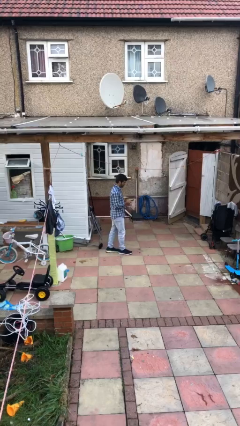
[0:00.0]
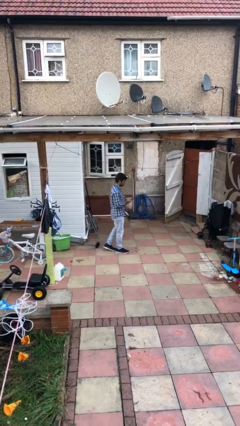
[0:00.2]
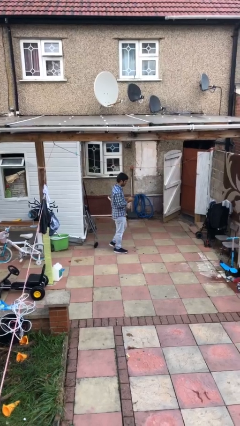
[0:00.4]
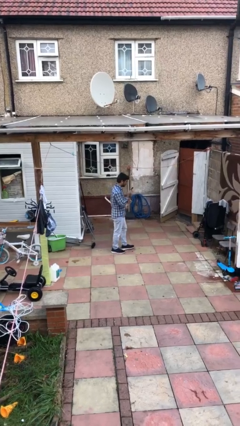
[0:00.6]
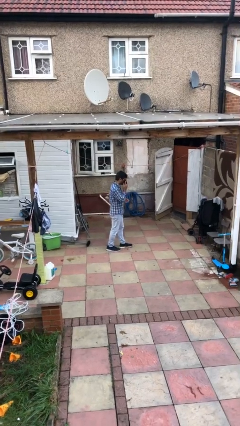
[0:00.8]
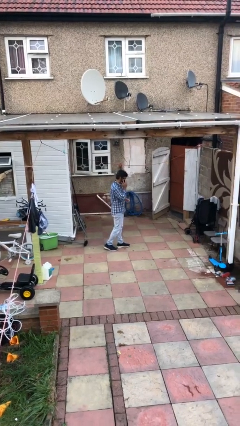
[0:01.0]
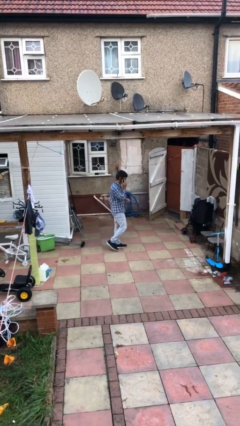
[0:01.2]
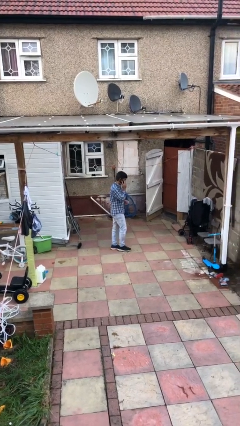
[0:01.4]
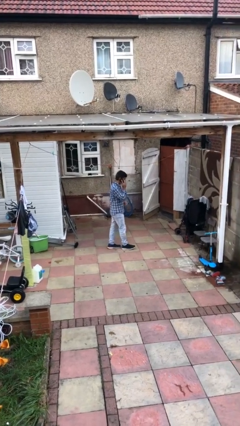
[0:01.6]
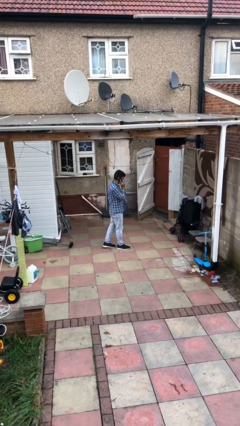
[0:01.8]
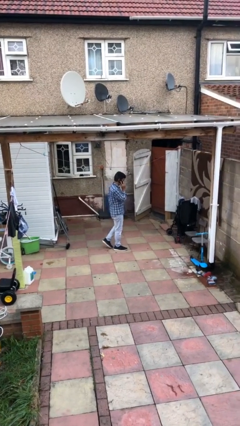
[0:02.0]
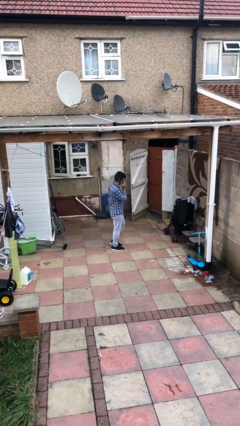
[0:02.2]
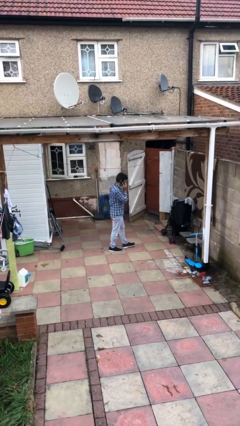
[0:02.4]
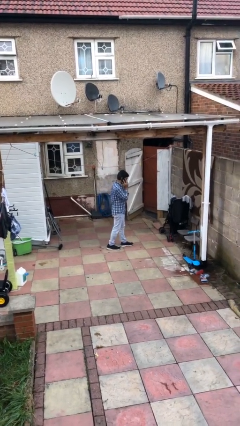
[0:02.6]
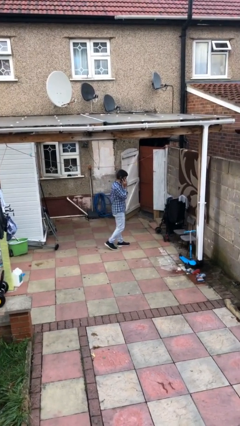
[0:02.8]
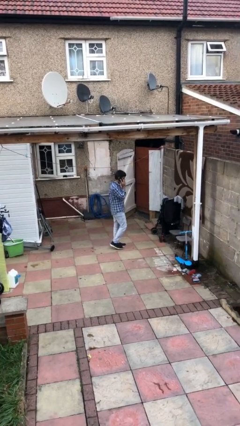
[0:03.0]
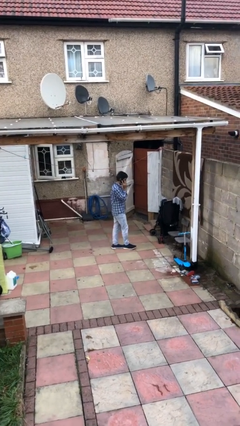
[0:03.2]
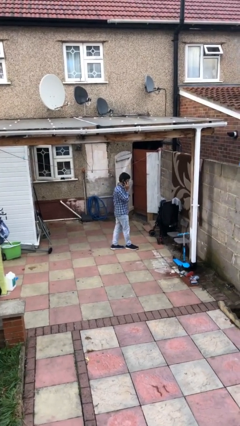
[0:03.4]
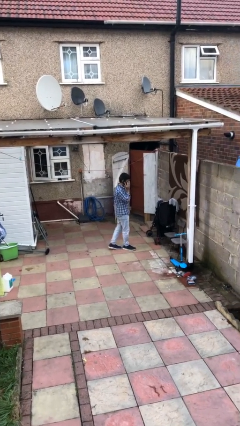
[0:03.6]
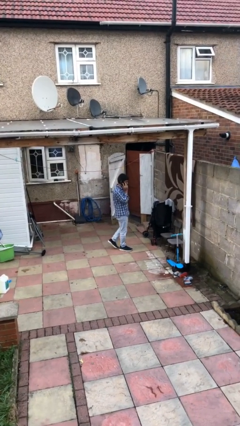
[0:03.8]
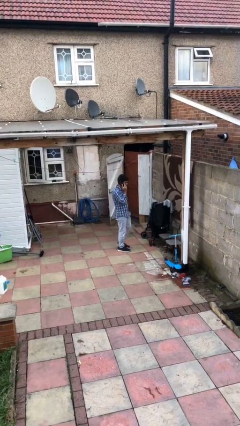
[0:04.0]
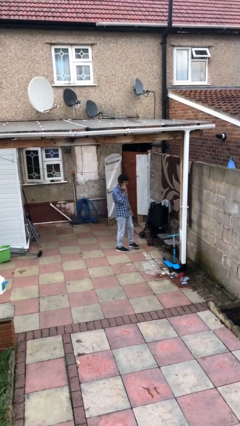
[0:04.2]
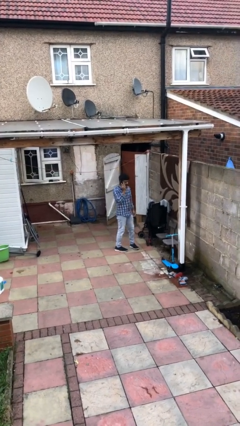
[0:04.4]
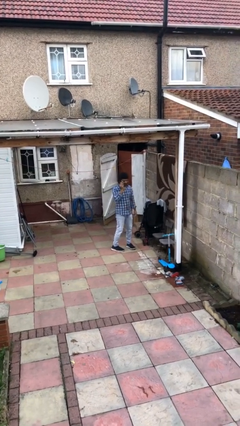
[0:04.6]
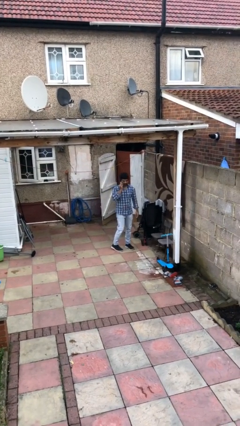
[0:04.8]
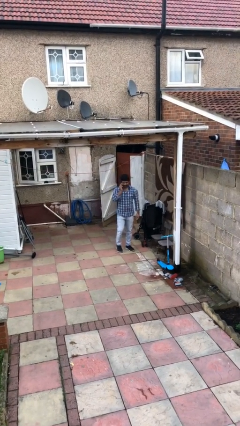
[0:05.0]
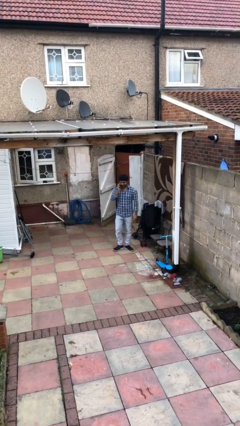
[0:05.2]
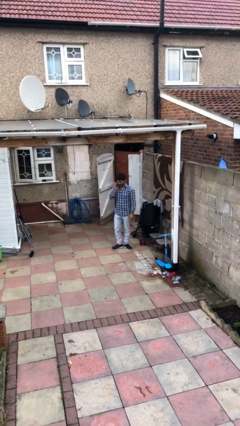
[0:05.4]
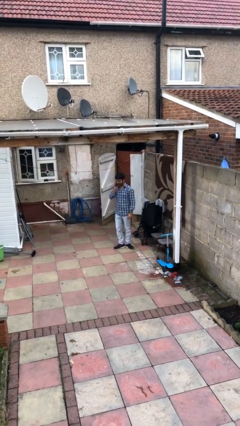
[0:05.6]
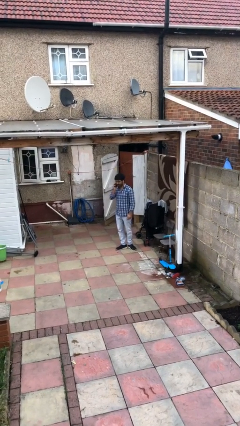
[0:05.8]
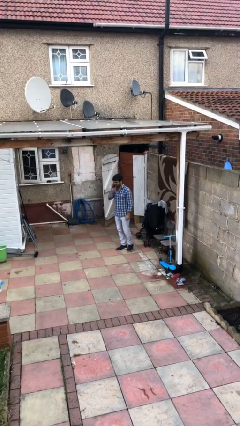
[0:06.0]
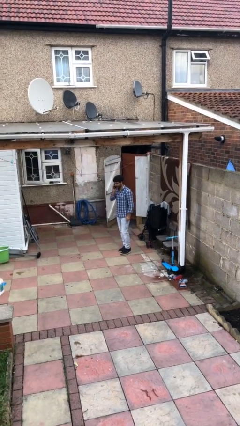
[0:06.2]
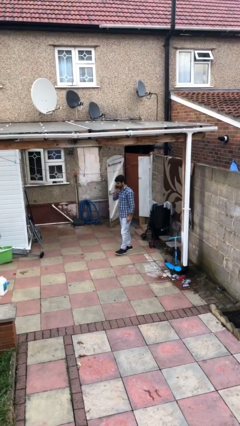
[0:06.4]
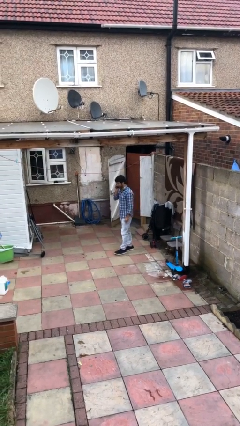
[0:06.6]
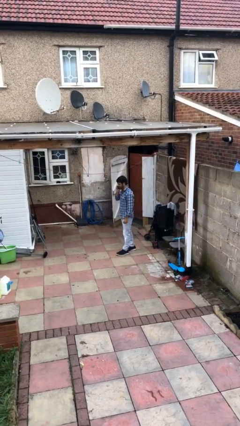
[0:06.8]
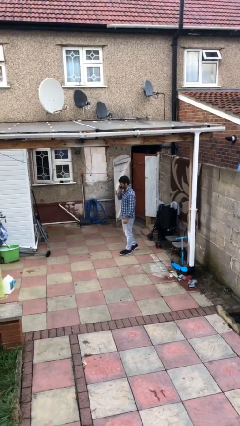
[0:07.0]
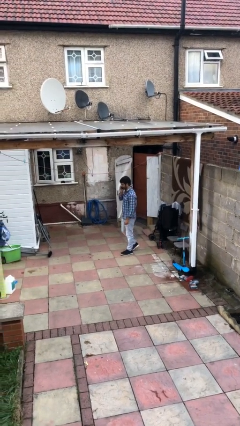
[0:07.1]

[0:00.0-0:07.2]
person talks on phone

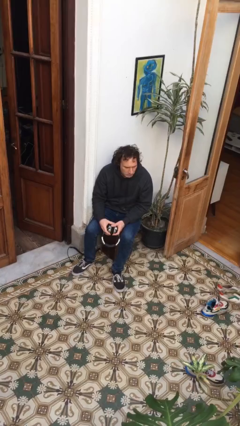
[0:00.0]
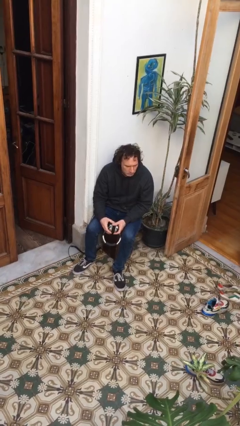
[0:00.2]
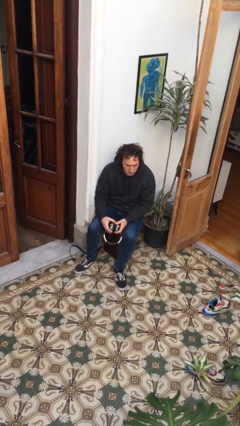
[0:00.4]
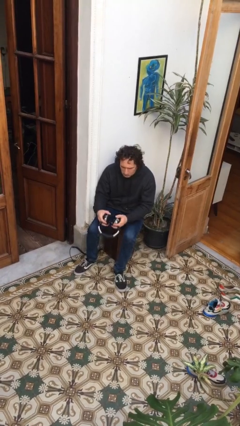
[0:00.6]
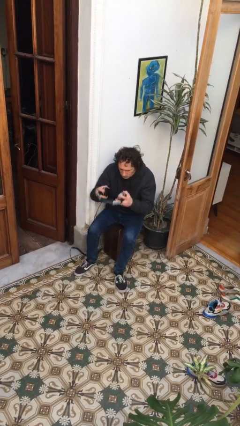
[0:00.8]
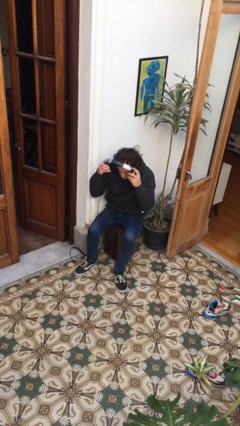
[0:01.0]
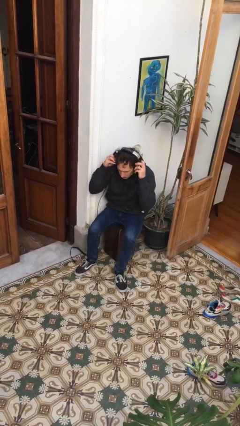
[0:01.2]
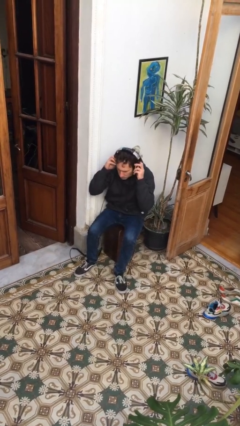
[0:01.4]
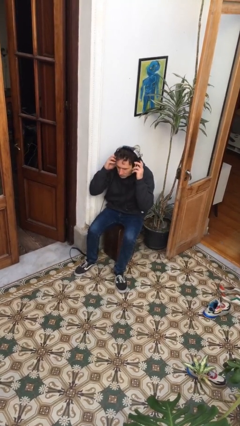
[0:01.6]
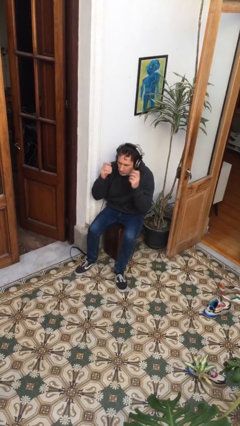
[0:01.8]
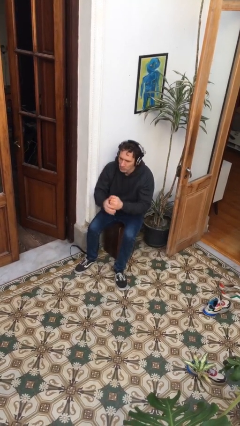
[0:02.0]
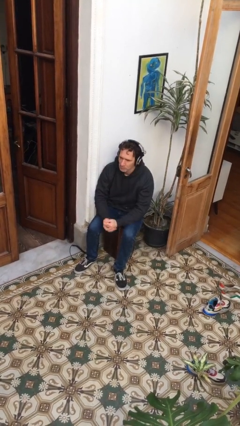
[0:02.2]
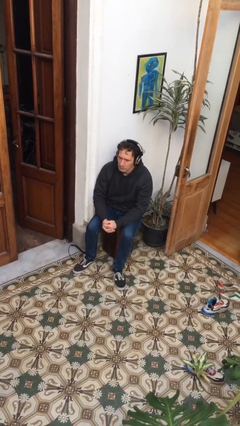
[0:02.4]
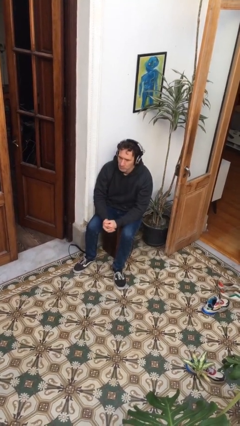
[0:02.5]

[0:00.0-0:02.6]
person puts on headphones

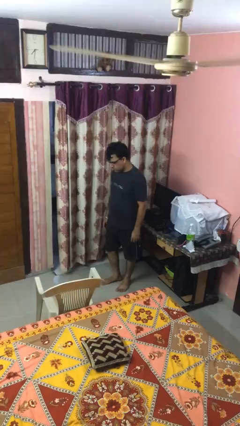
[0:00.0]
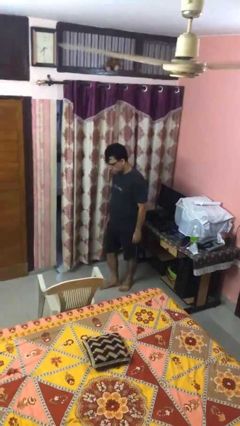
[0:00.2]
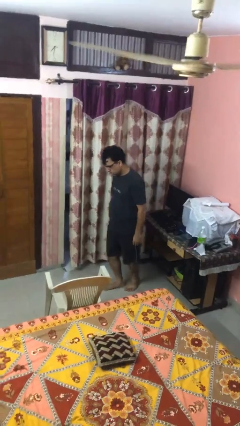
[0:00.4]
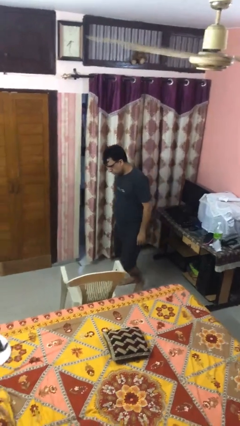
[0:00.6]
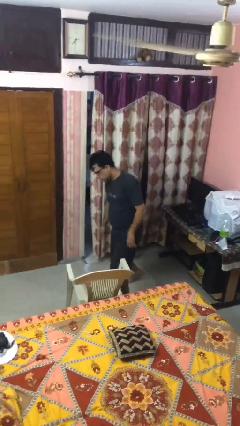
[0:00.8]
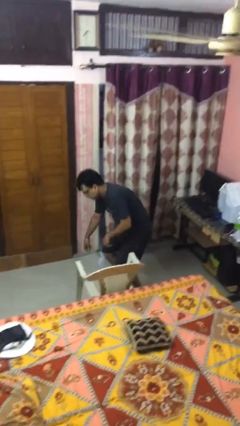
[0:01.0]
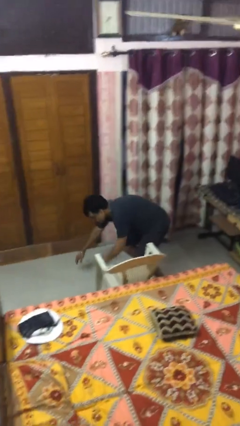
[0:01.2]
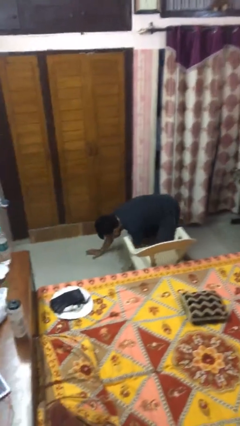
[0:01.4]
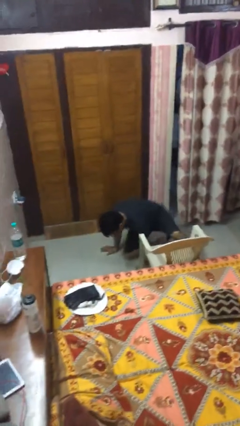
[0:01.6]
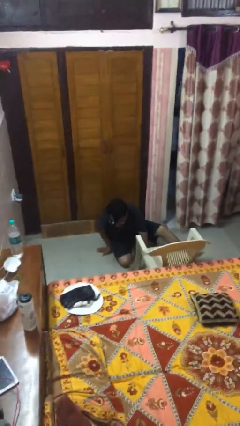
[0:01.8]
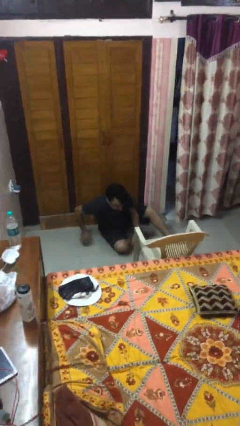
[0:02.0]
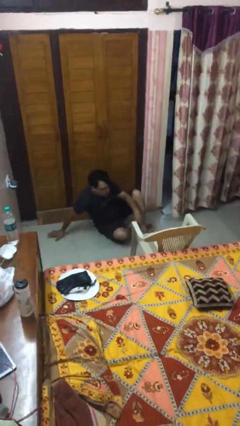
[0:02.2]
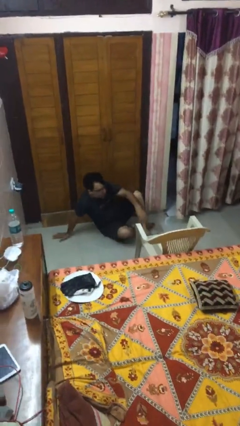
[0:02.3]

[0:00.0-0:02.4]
person trips on object on floor

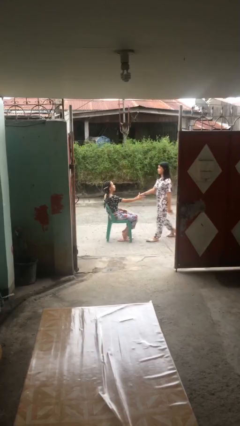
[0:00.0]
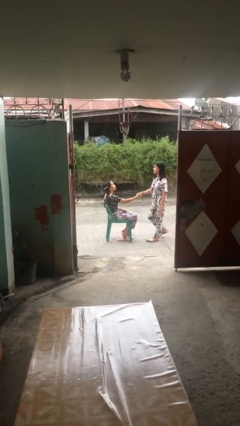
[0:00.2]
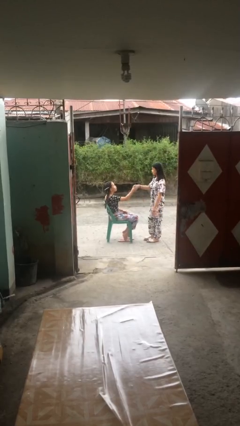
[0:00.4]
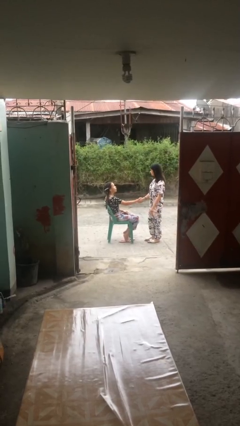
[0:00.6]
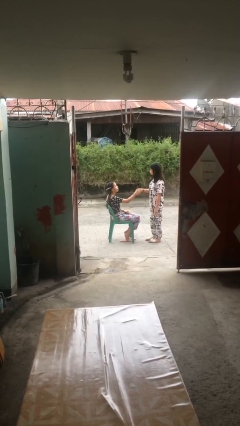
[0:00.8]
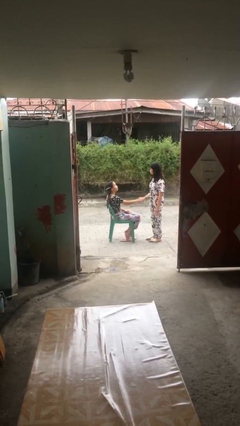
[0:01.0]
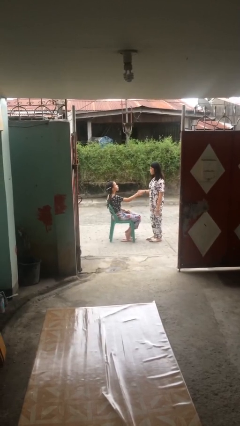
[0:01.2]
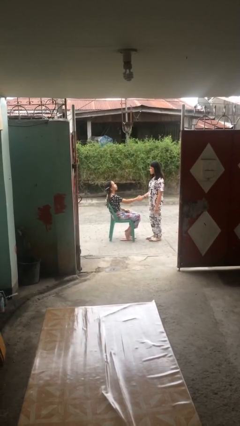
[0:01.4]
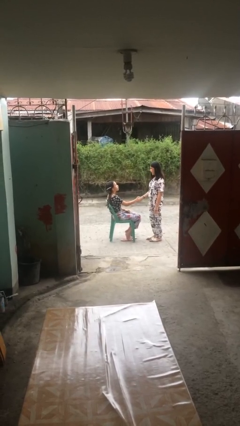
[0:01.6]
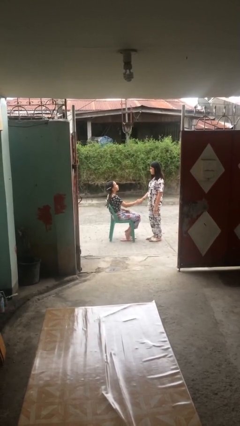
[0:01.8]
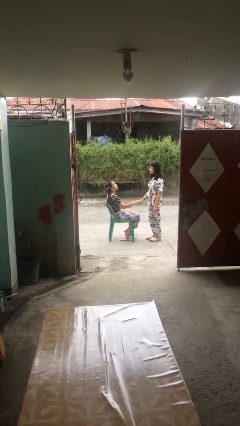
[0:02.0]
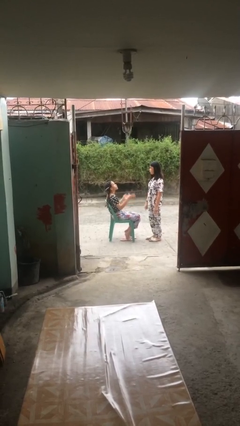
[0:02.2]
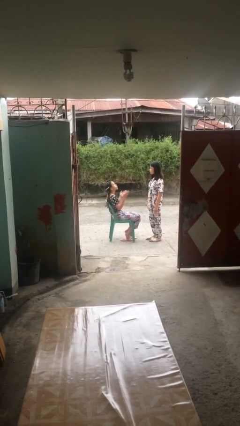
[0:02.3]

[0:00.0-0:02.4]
person shakes hand

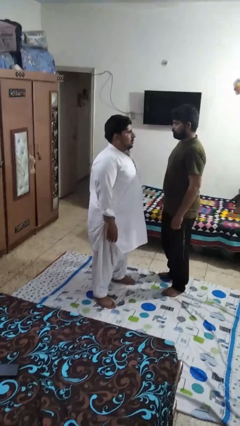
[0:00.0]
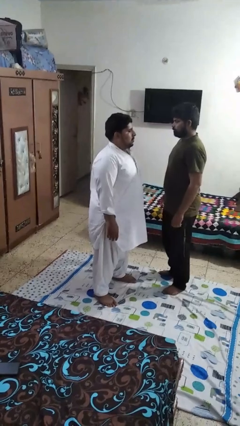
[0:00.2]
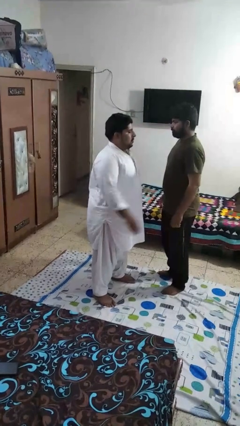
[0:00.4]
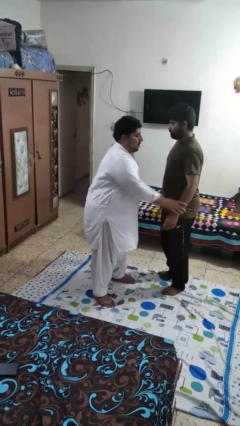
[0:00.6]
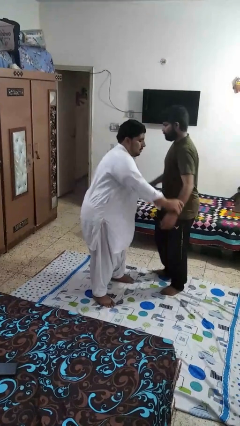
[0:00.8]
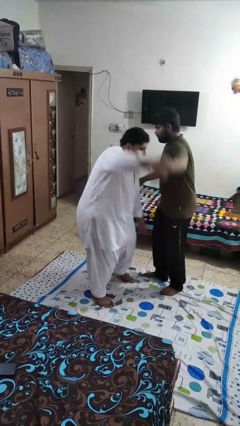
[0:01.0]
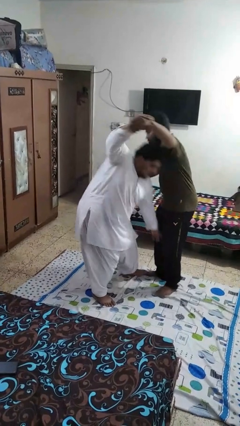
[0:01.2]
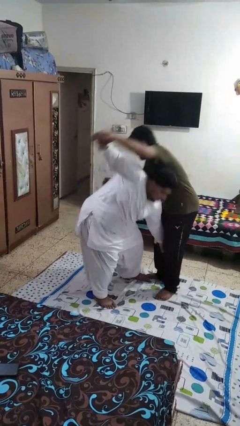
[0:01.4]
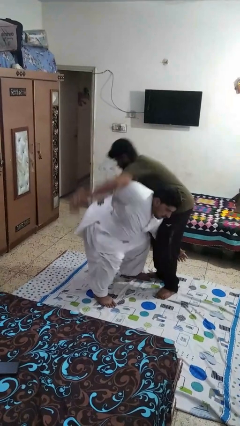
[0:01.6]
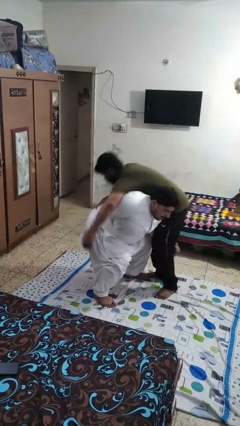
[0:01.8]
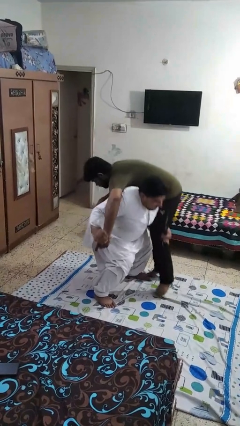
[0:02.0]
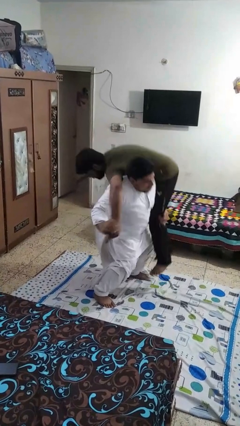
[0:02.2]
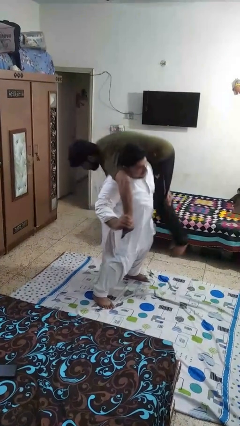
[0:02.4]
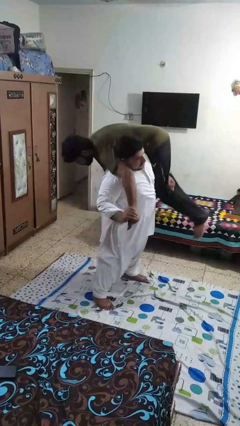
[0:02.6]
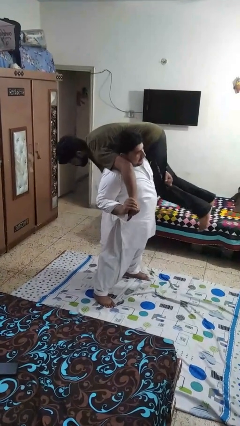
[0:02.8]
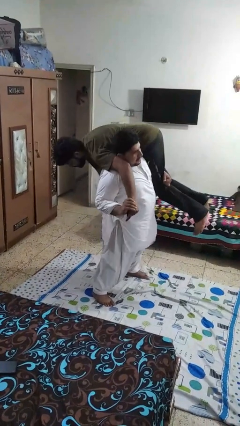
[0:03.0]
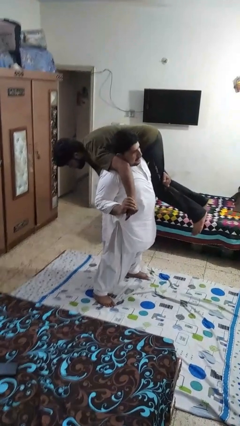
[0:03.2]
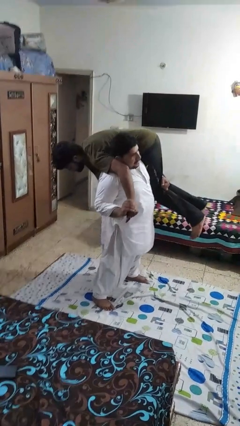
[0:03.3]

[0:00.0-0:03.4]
person carries person over shoulder
